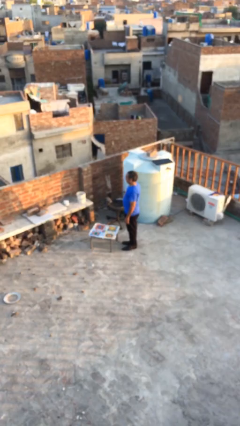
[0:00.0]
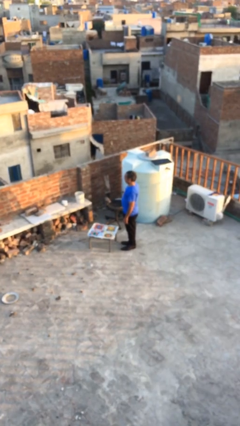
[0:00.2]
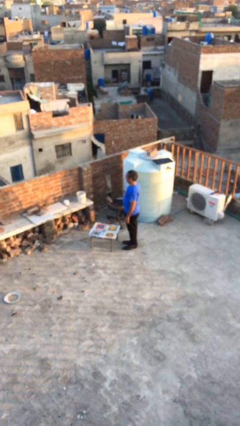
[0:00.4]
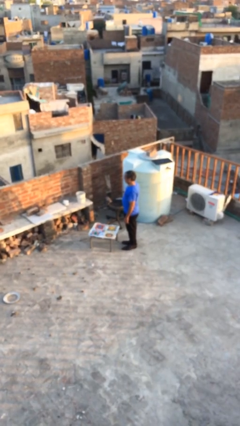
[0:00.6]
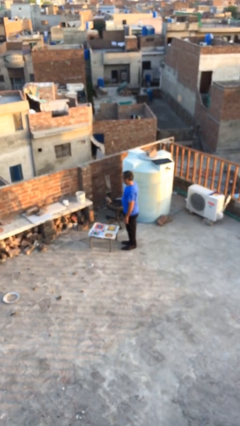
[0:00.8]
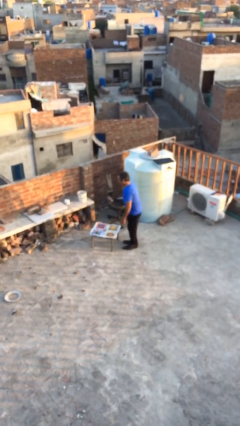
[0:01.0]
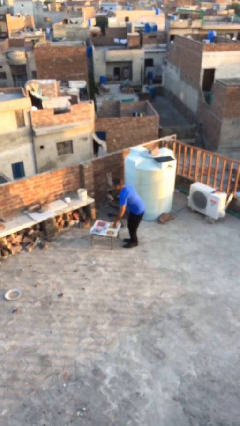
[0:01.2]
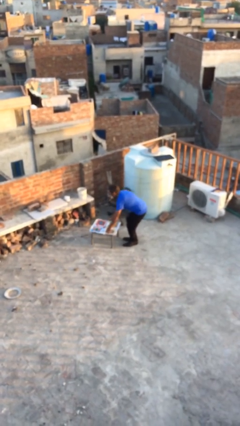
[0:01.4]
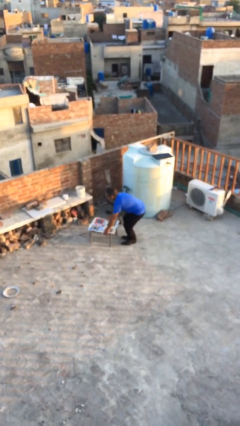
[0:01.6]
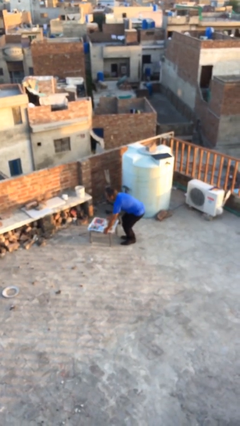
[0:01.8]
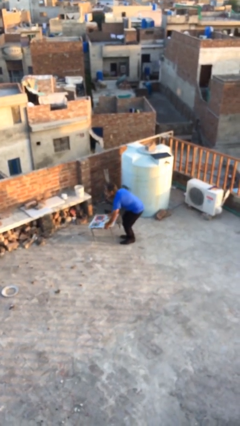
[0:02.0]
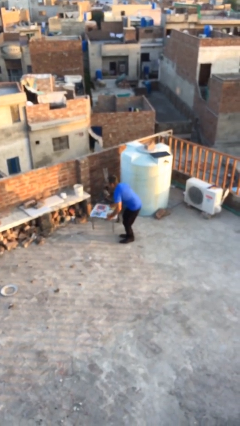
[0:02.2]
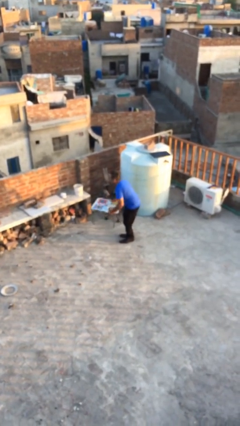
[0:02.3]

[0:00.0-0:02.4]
person picks up object from floor

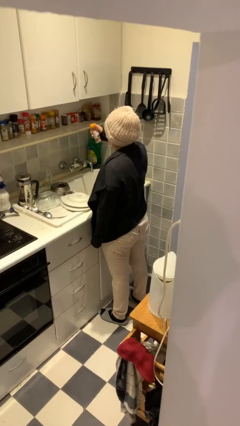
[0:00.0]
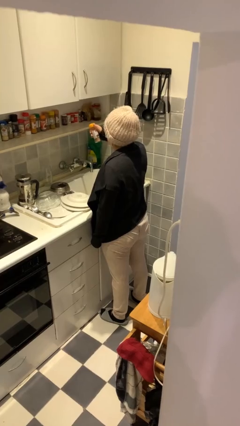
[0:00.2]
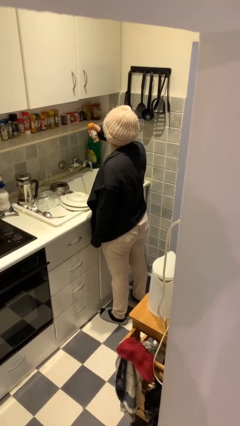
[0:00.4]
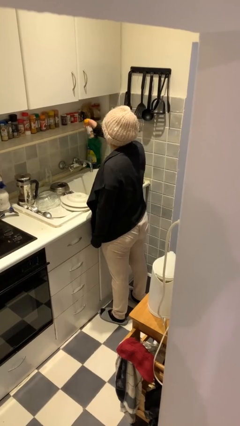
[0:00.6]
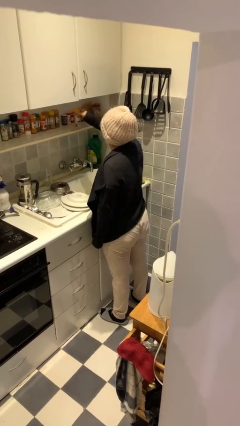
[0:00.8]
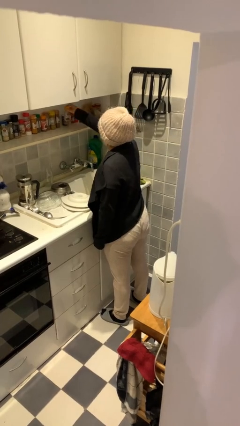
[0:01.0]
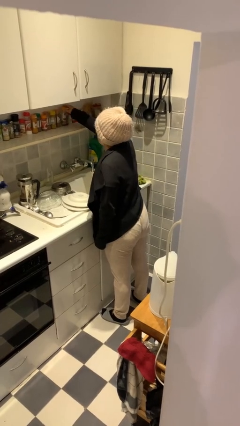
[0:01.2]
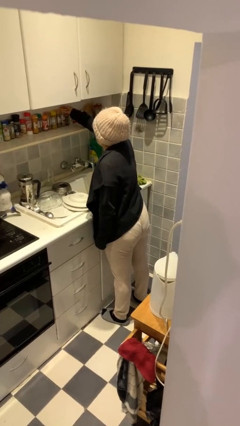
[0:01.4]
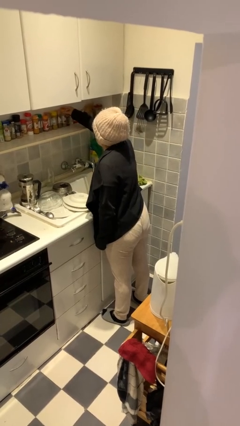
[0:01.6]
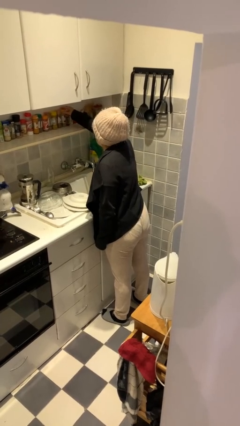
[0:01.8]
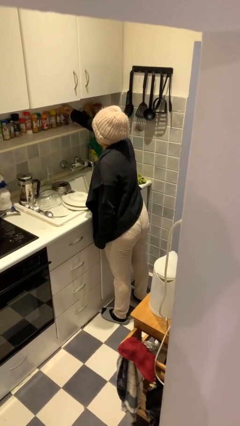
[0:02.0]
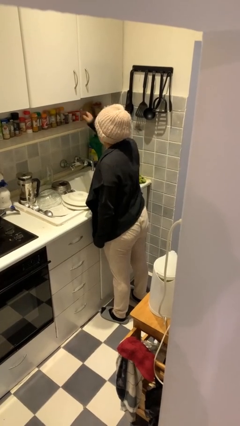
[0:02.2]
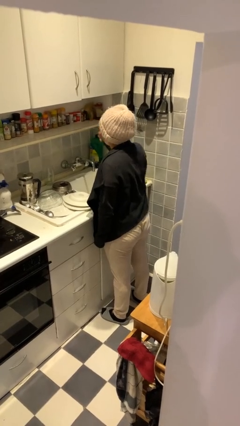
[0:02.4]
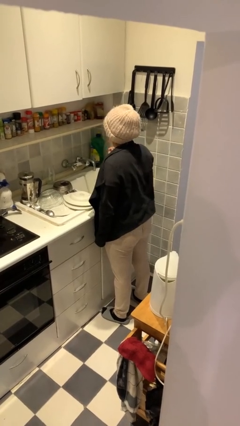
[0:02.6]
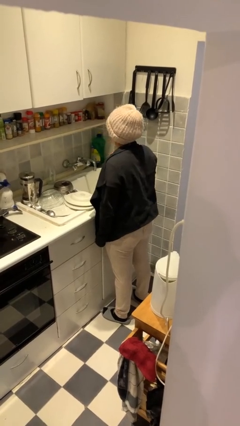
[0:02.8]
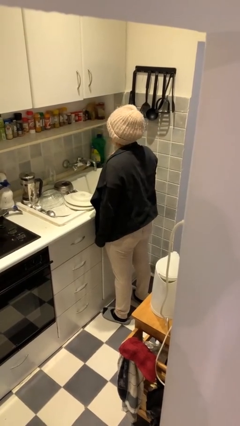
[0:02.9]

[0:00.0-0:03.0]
person puts down object on countertop

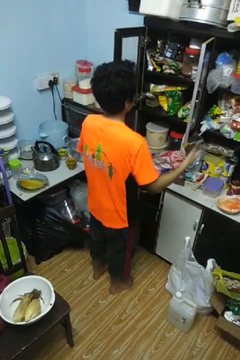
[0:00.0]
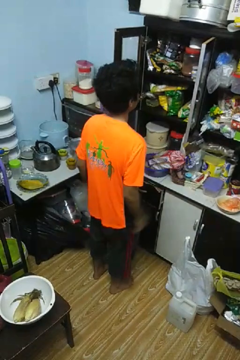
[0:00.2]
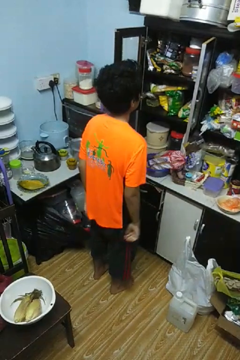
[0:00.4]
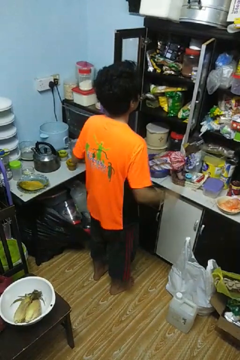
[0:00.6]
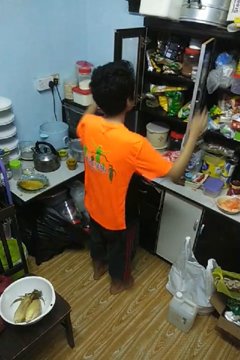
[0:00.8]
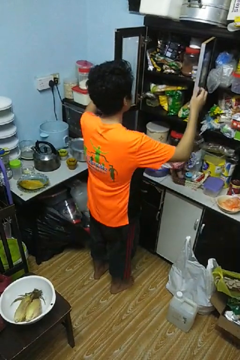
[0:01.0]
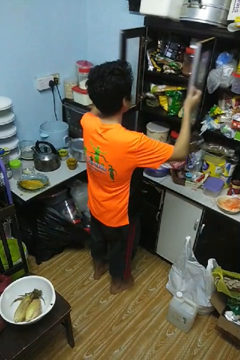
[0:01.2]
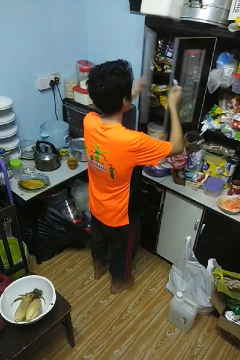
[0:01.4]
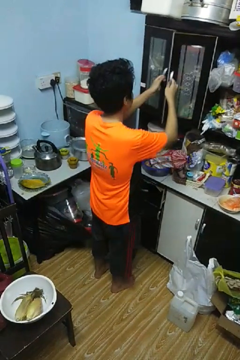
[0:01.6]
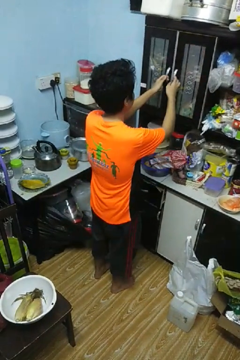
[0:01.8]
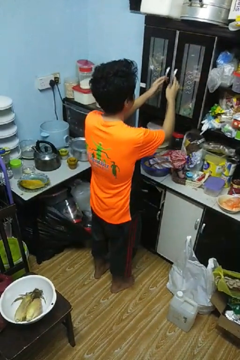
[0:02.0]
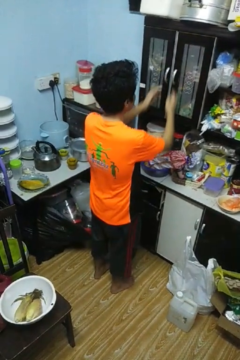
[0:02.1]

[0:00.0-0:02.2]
person closes cabinet

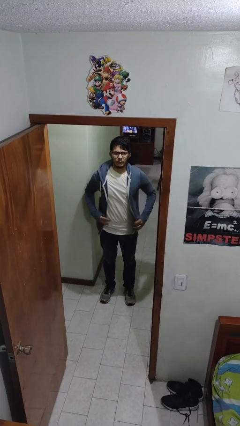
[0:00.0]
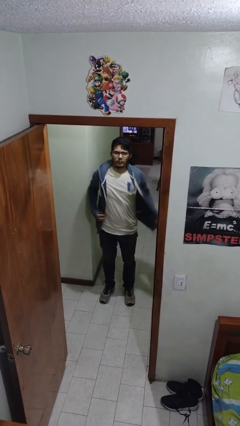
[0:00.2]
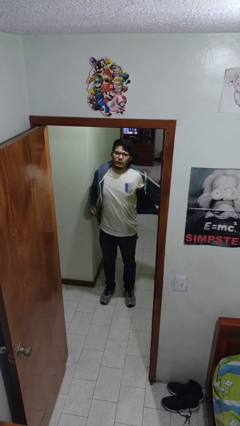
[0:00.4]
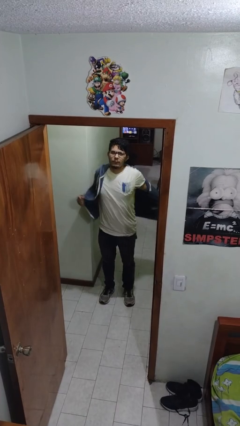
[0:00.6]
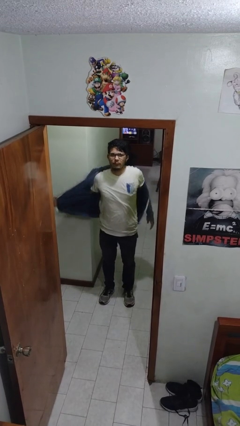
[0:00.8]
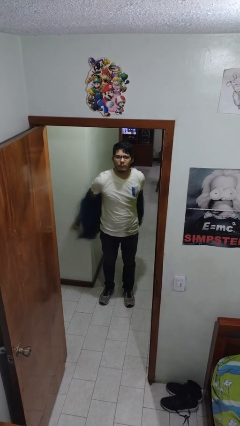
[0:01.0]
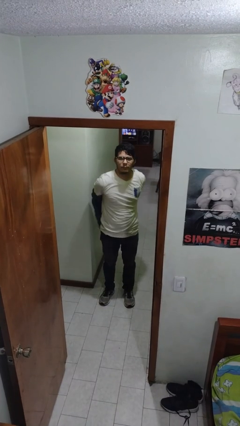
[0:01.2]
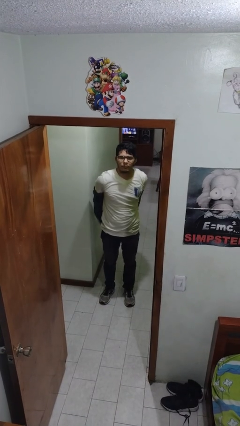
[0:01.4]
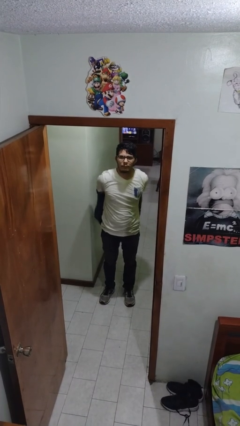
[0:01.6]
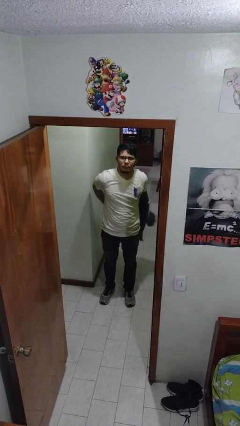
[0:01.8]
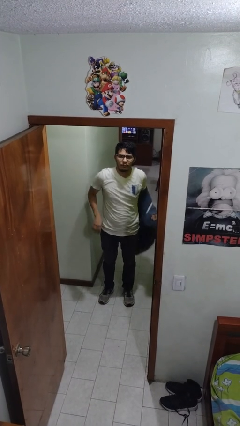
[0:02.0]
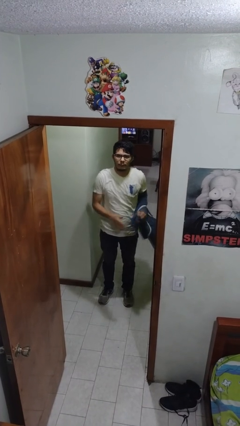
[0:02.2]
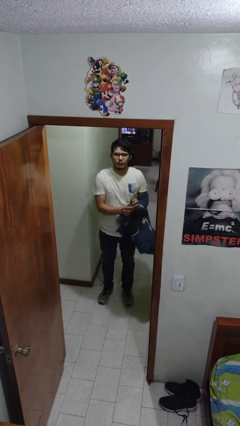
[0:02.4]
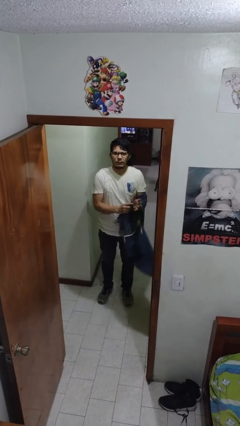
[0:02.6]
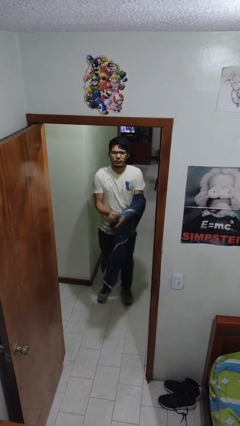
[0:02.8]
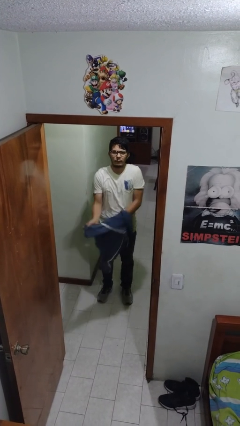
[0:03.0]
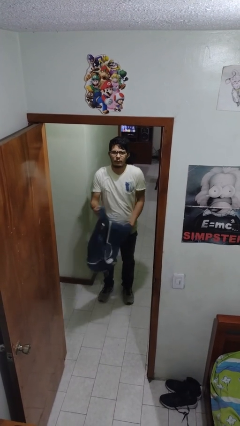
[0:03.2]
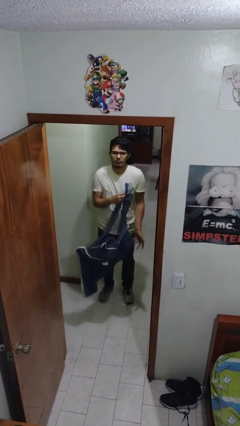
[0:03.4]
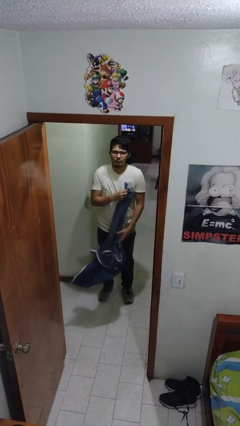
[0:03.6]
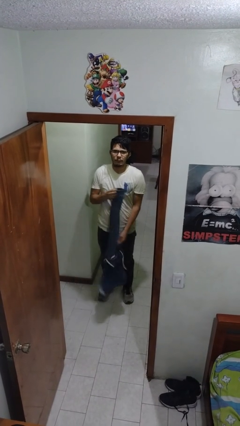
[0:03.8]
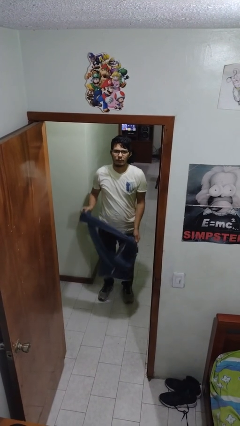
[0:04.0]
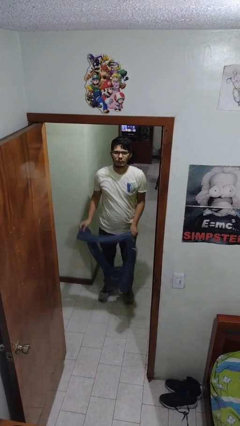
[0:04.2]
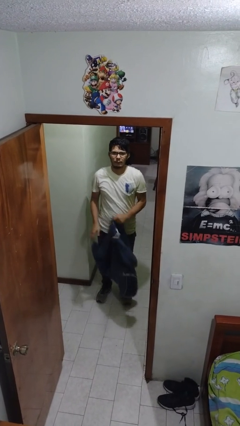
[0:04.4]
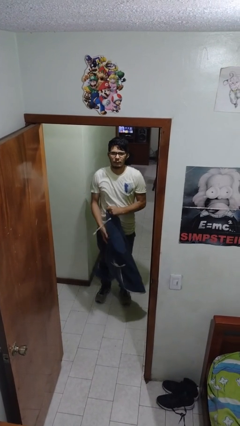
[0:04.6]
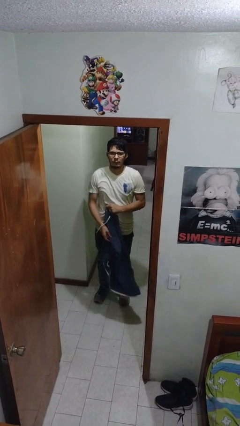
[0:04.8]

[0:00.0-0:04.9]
person takes off jacket

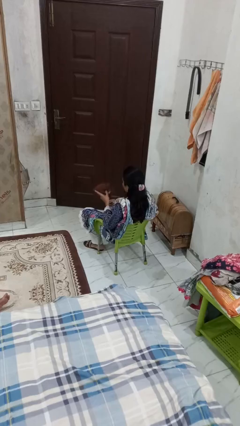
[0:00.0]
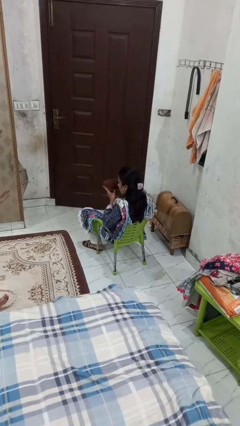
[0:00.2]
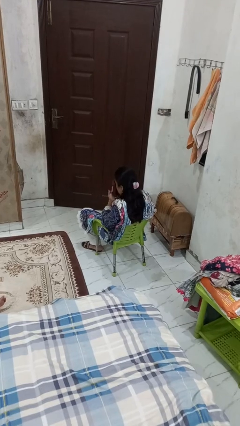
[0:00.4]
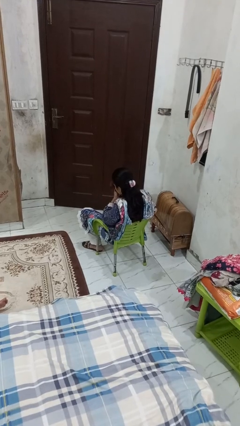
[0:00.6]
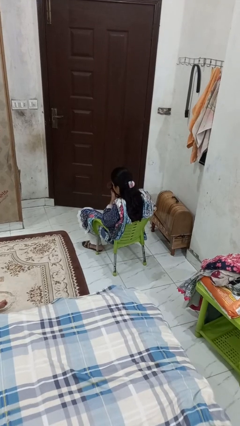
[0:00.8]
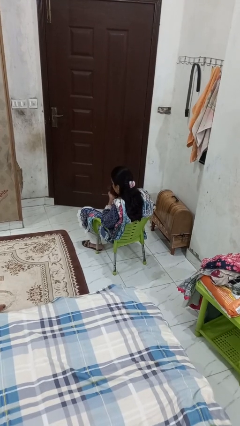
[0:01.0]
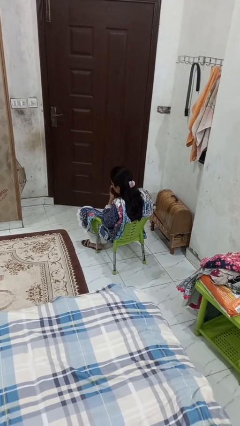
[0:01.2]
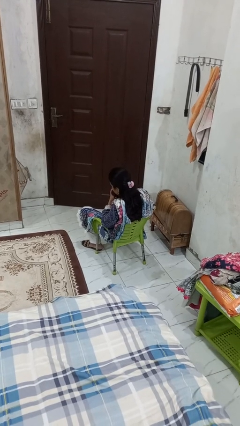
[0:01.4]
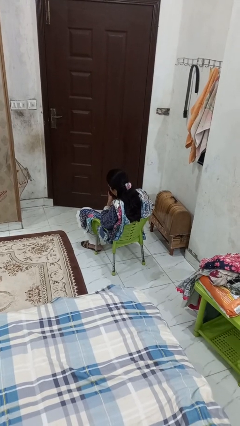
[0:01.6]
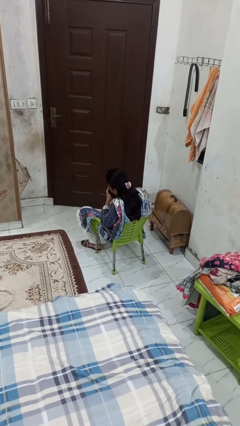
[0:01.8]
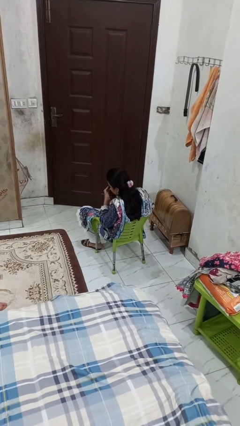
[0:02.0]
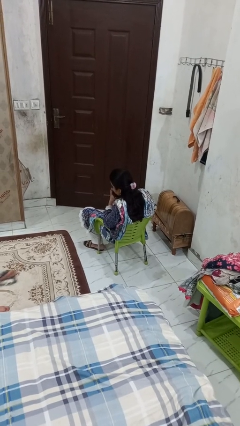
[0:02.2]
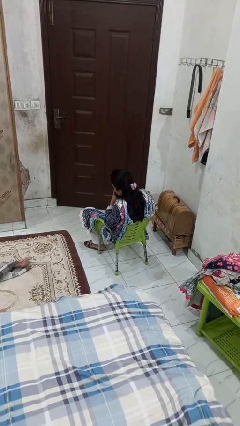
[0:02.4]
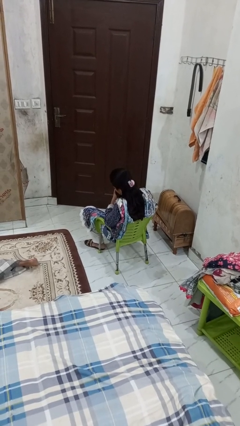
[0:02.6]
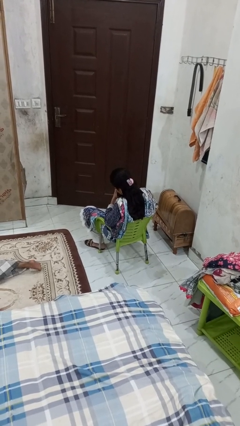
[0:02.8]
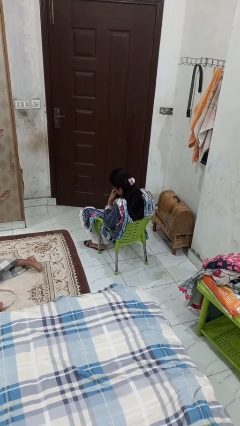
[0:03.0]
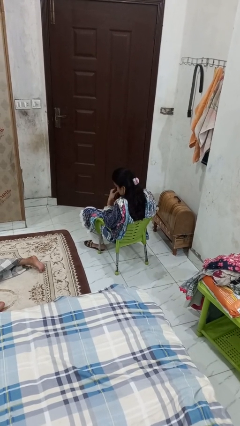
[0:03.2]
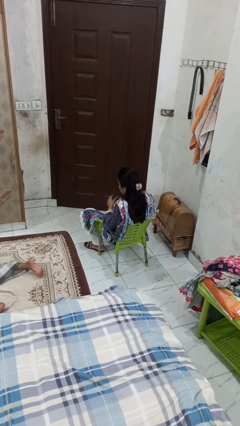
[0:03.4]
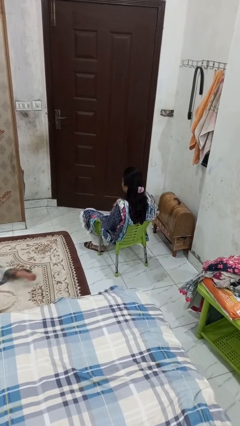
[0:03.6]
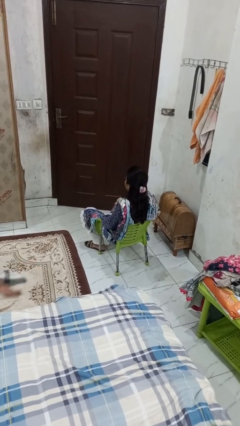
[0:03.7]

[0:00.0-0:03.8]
person blows nose

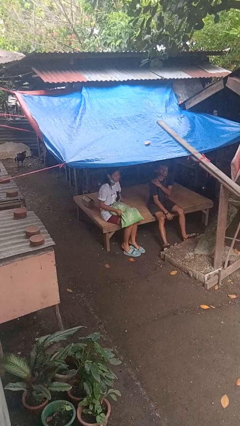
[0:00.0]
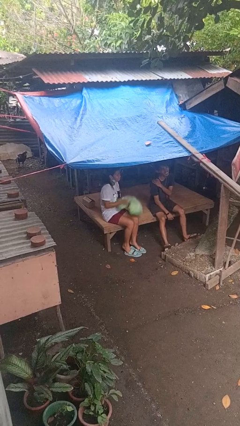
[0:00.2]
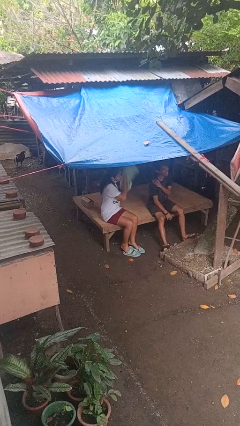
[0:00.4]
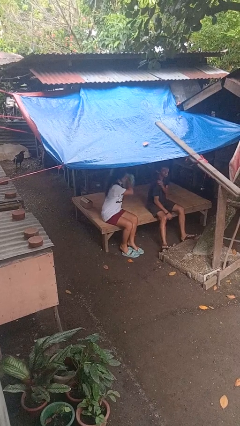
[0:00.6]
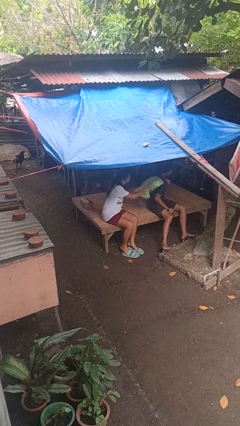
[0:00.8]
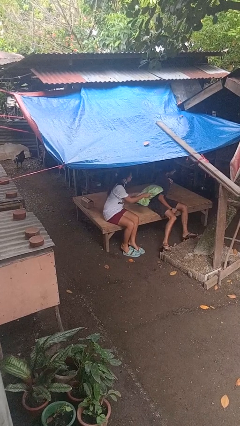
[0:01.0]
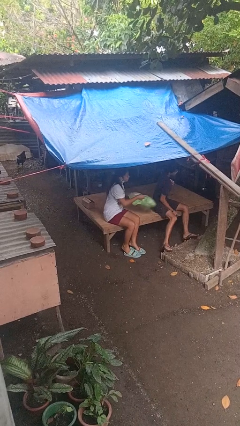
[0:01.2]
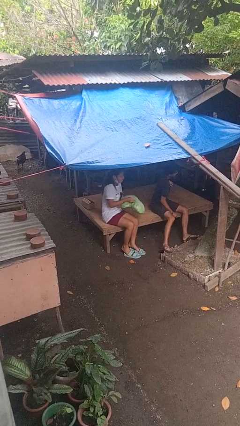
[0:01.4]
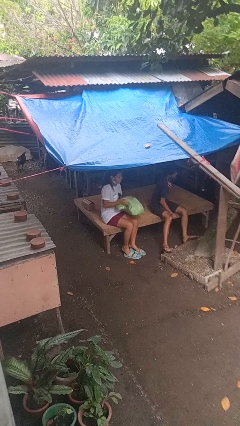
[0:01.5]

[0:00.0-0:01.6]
person hits person with pillow
